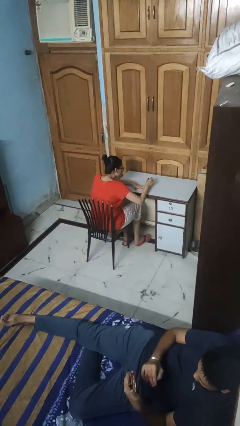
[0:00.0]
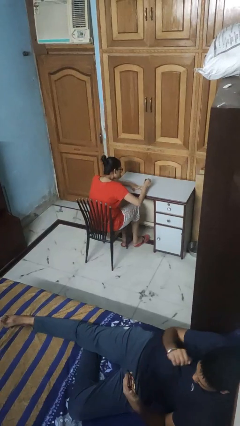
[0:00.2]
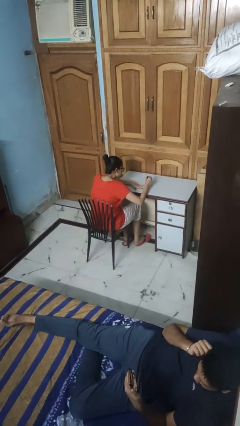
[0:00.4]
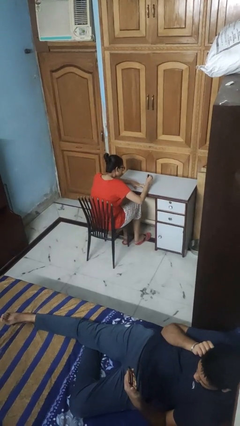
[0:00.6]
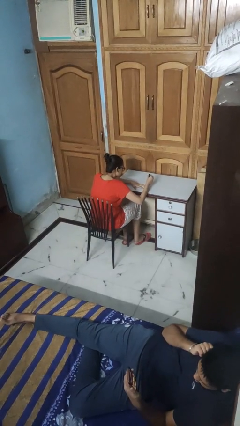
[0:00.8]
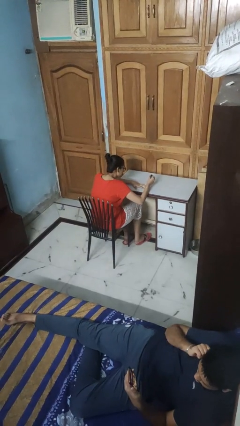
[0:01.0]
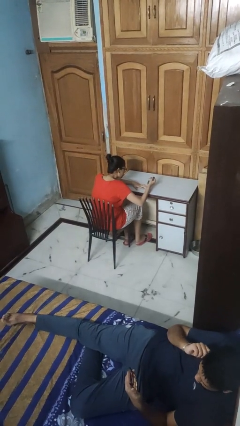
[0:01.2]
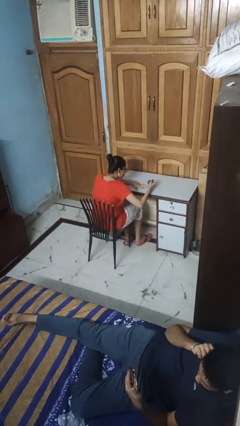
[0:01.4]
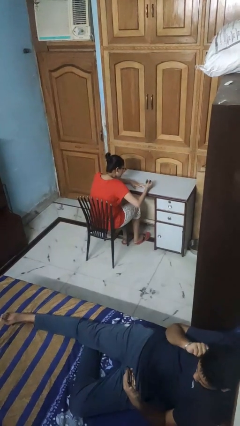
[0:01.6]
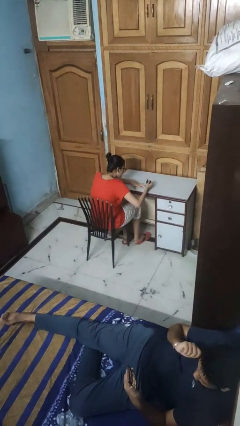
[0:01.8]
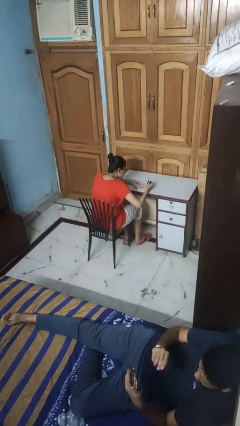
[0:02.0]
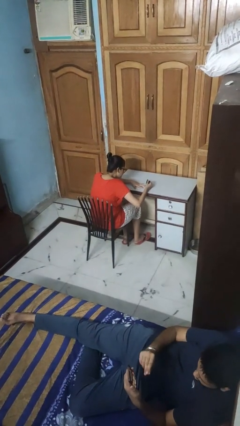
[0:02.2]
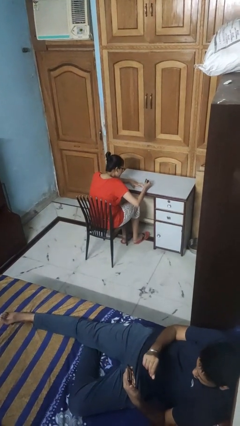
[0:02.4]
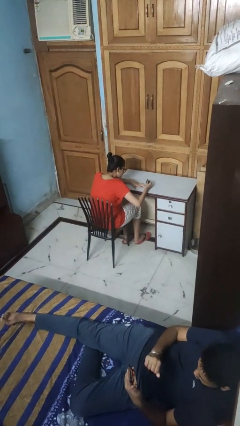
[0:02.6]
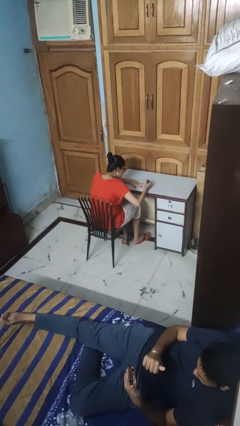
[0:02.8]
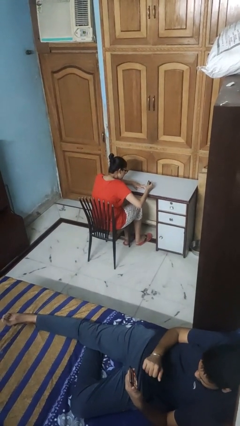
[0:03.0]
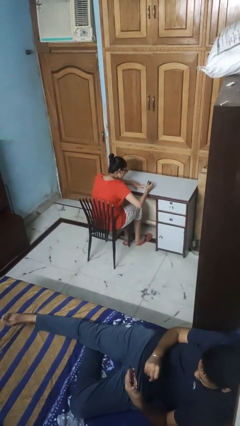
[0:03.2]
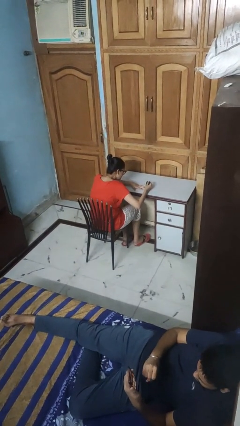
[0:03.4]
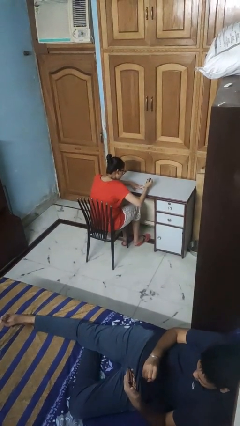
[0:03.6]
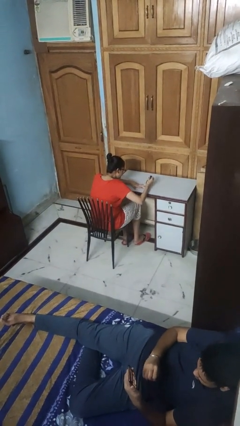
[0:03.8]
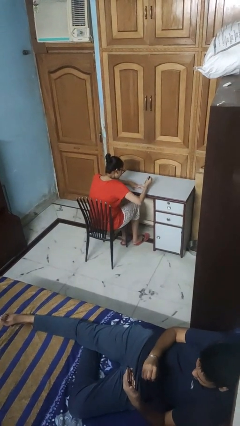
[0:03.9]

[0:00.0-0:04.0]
person paints fingernails

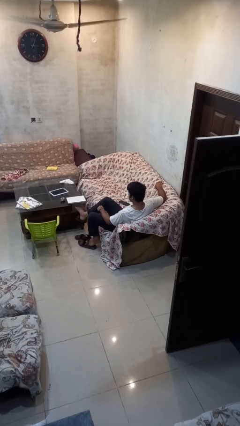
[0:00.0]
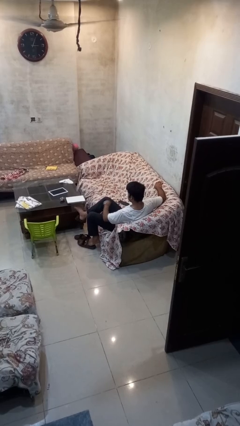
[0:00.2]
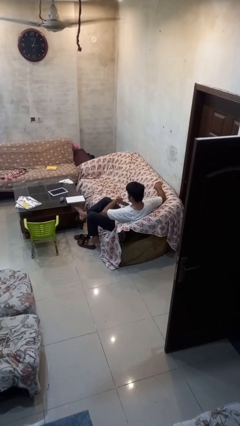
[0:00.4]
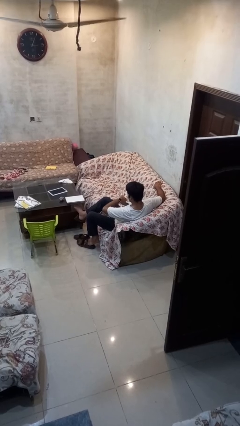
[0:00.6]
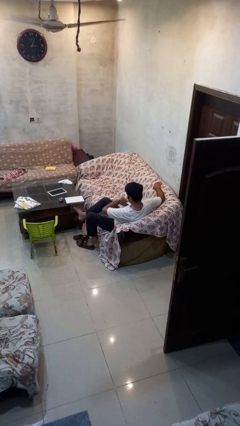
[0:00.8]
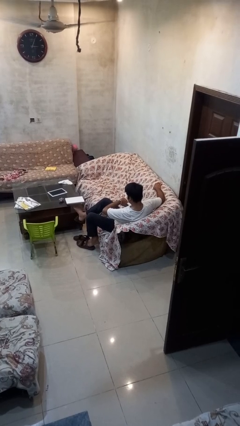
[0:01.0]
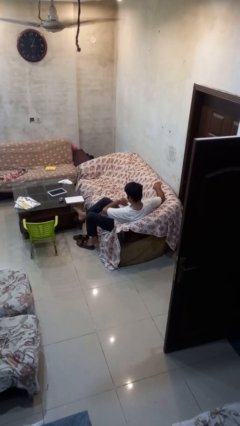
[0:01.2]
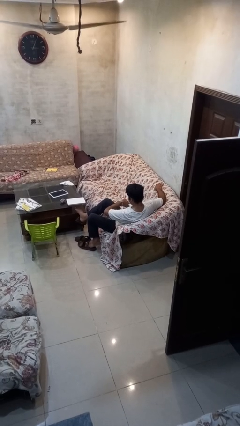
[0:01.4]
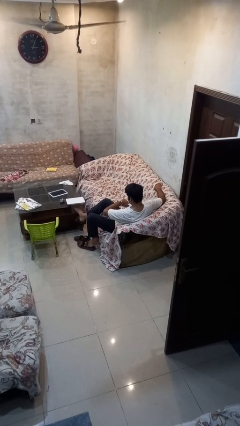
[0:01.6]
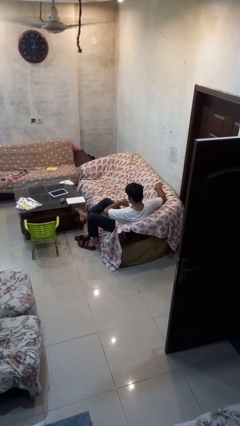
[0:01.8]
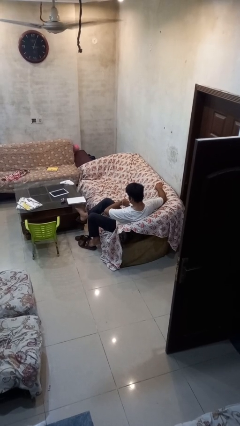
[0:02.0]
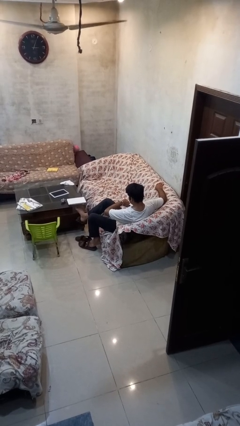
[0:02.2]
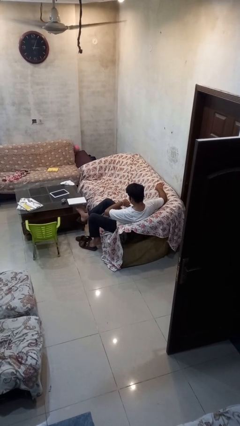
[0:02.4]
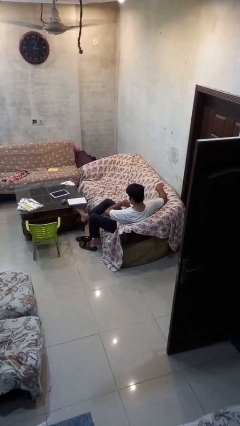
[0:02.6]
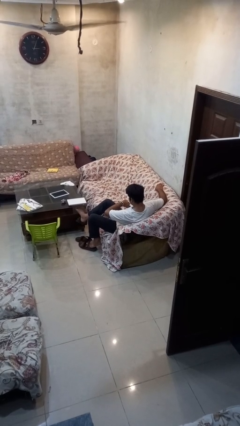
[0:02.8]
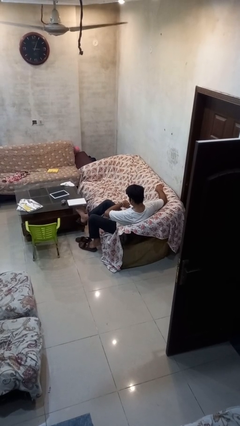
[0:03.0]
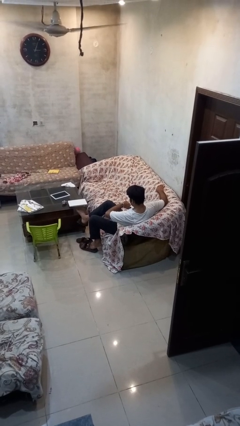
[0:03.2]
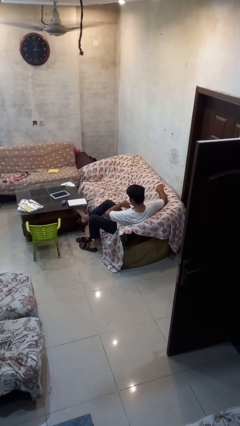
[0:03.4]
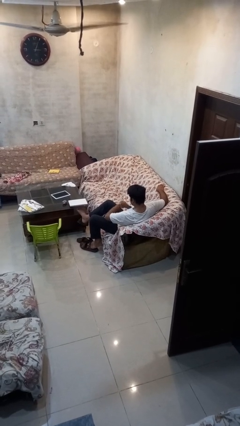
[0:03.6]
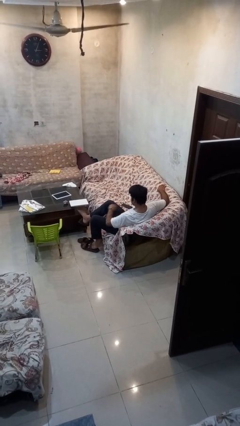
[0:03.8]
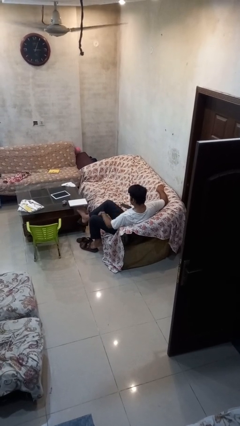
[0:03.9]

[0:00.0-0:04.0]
person looks at wristwatch

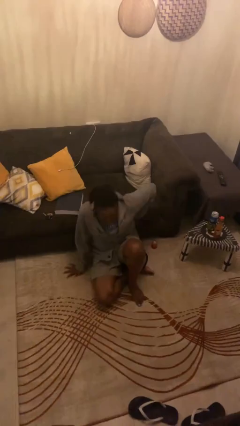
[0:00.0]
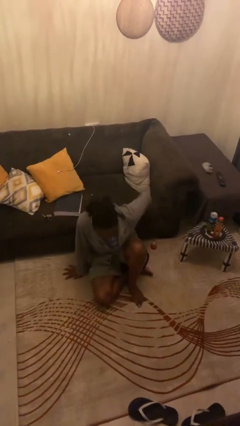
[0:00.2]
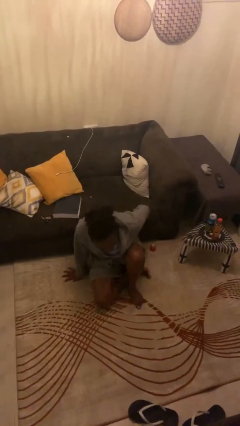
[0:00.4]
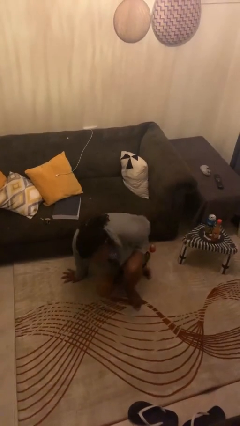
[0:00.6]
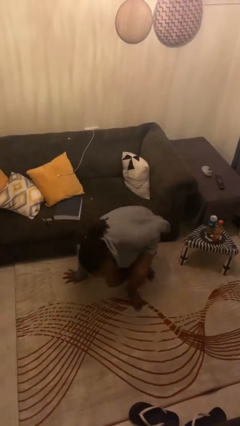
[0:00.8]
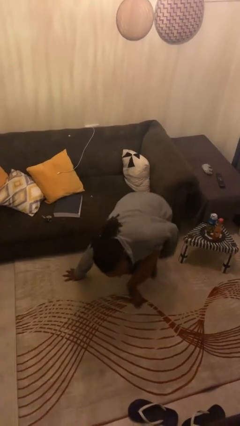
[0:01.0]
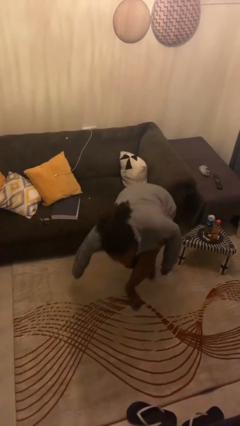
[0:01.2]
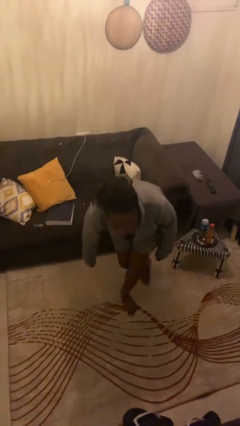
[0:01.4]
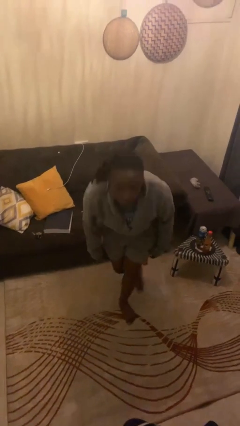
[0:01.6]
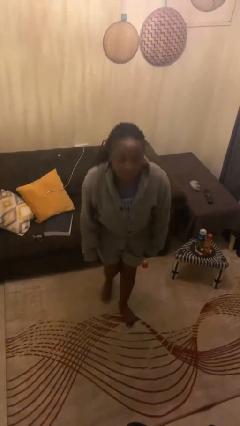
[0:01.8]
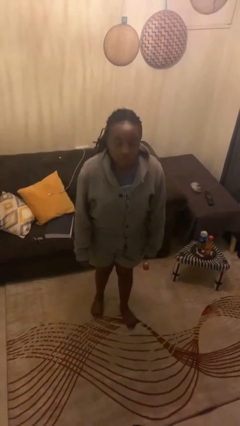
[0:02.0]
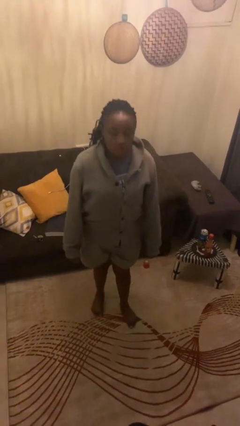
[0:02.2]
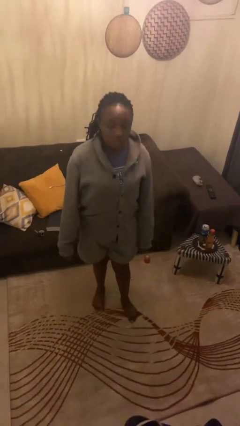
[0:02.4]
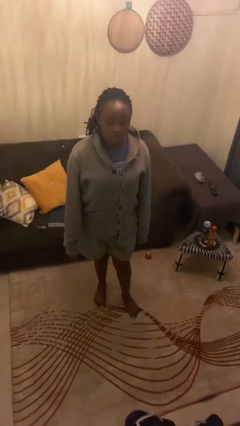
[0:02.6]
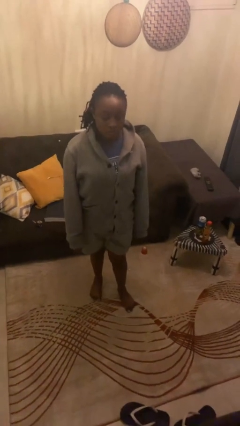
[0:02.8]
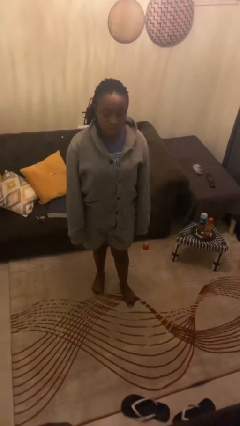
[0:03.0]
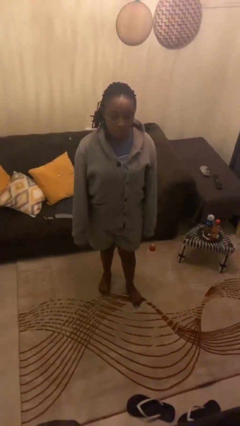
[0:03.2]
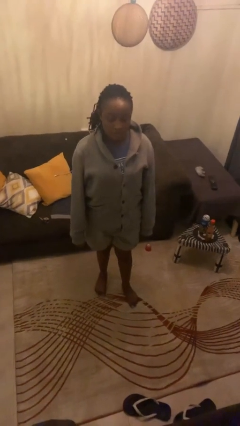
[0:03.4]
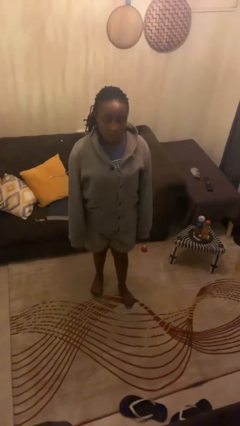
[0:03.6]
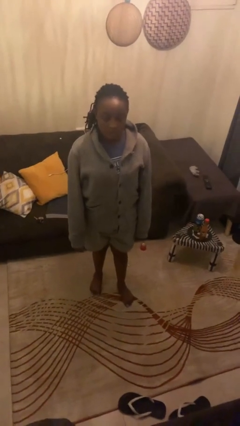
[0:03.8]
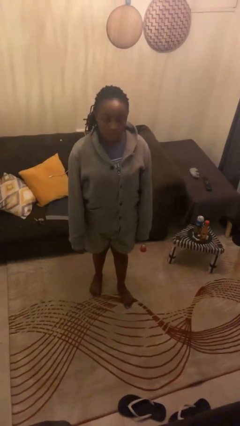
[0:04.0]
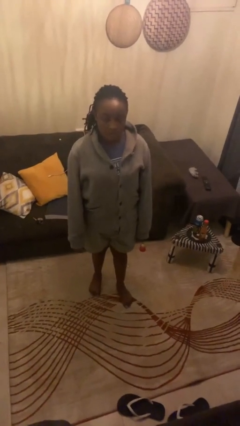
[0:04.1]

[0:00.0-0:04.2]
person stands up from floor

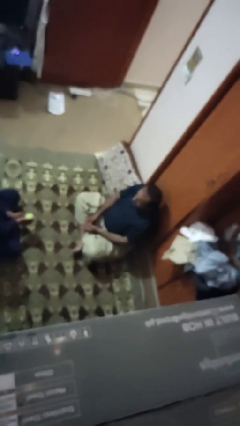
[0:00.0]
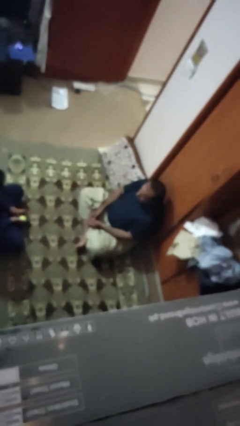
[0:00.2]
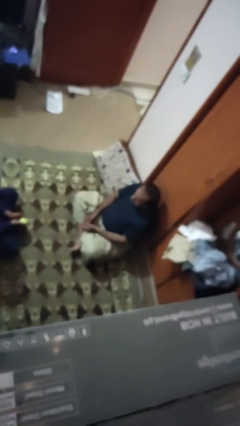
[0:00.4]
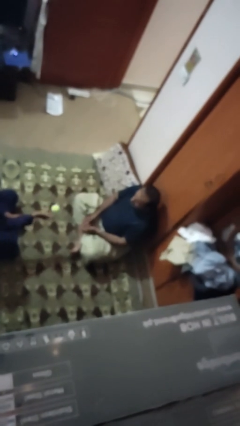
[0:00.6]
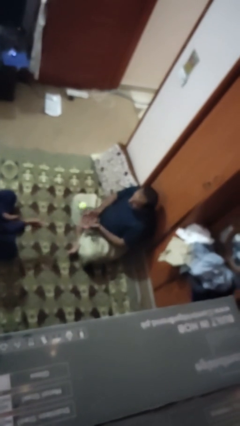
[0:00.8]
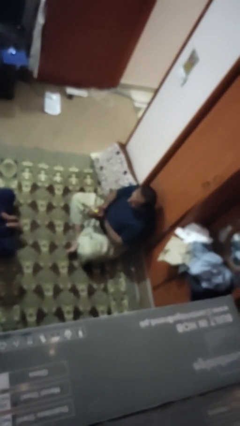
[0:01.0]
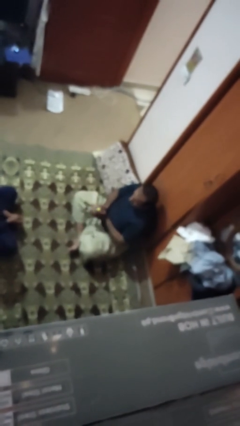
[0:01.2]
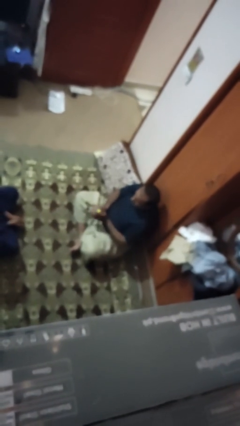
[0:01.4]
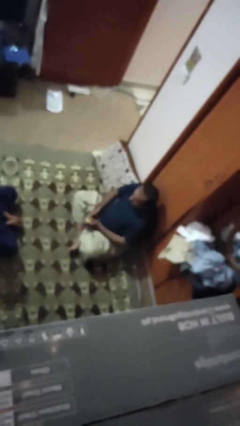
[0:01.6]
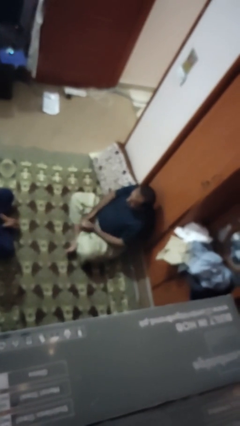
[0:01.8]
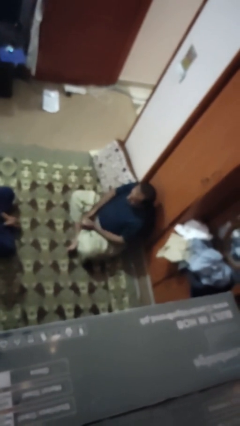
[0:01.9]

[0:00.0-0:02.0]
person catches object from person

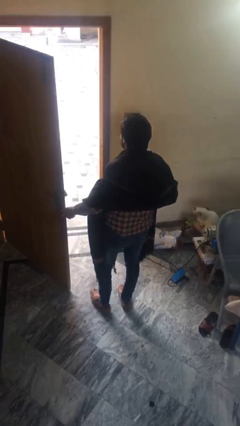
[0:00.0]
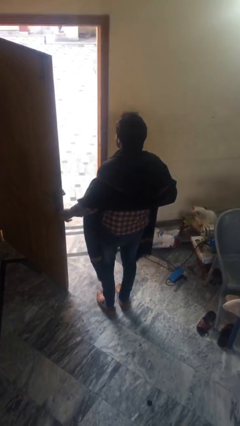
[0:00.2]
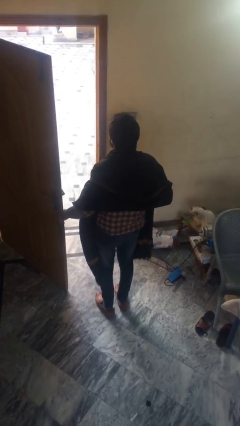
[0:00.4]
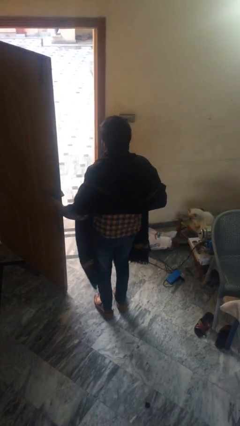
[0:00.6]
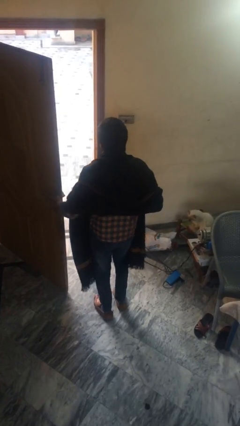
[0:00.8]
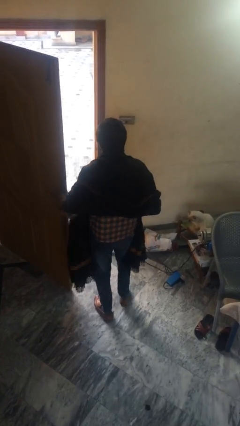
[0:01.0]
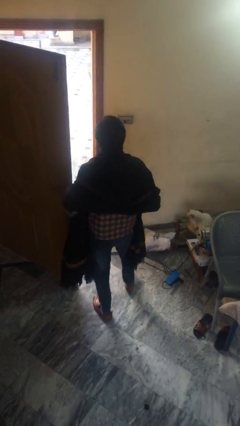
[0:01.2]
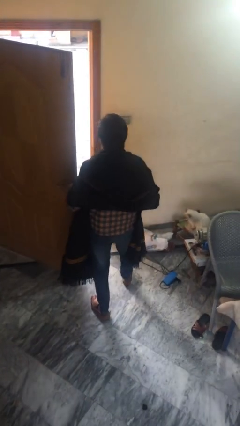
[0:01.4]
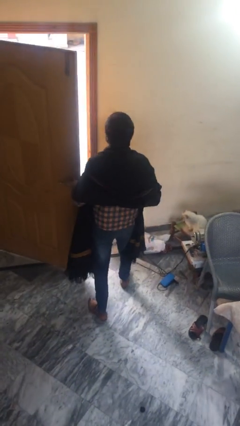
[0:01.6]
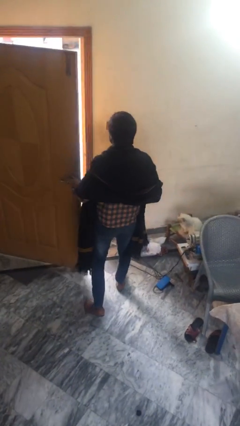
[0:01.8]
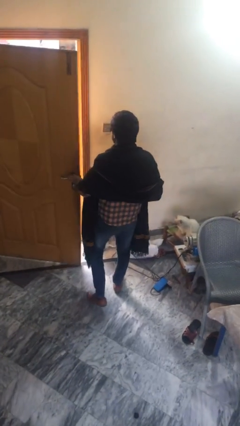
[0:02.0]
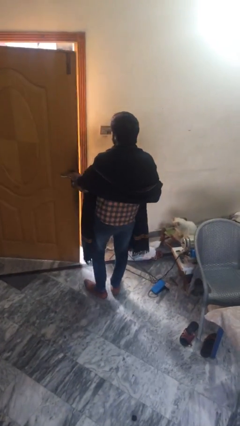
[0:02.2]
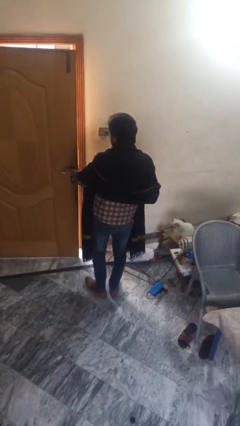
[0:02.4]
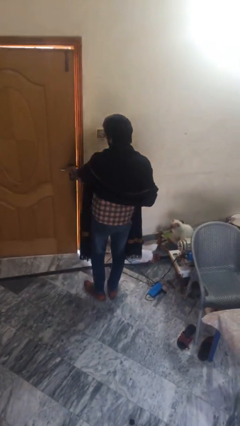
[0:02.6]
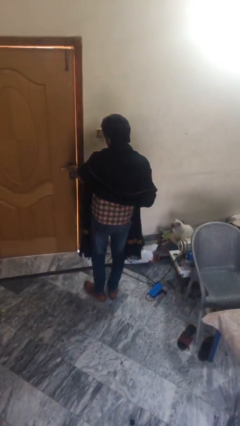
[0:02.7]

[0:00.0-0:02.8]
person closes facility door

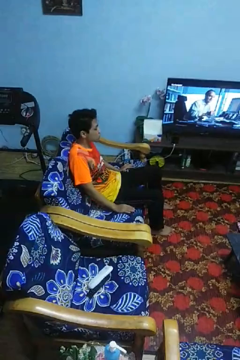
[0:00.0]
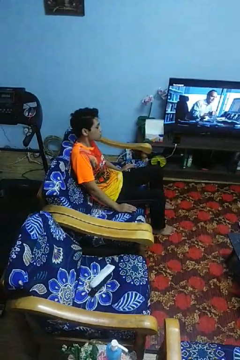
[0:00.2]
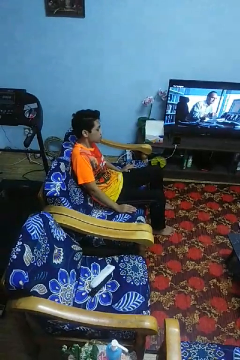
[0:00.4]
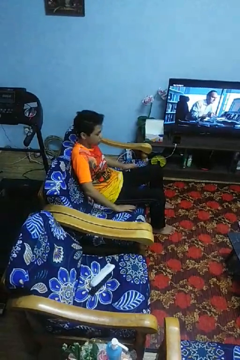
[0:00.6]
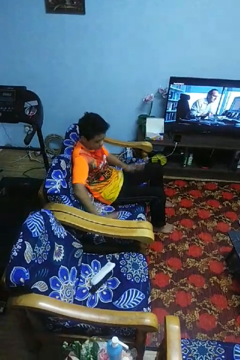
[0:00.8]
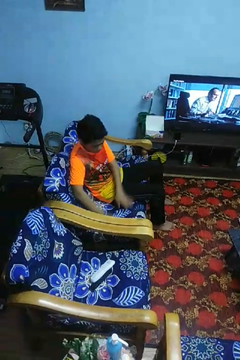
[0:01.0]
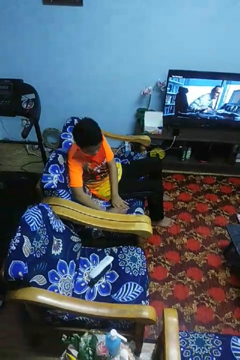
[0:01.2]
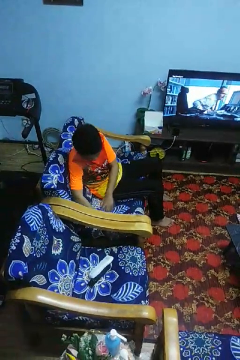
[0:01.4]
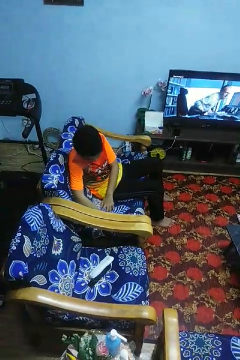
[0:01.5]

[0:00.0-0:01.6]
person searches in couch
